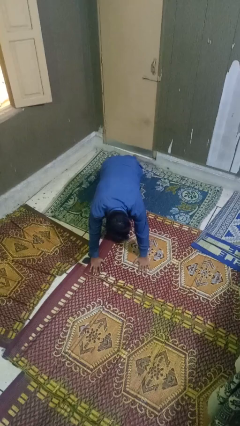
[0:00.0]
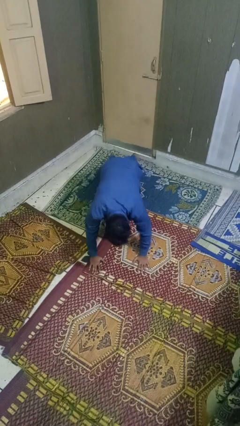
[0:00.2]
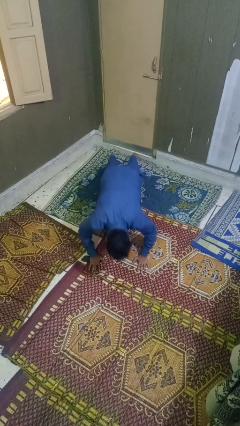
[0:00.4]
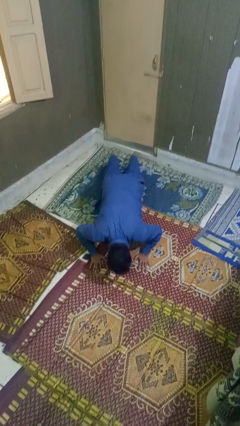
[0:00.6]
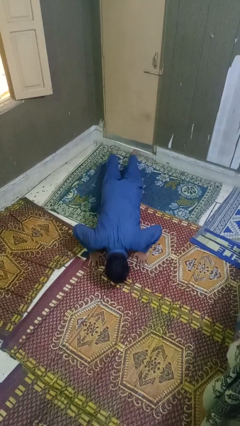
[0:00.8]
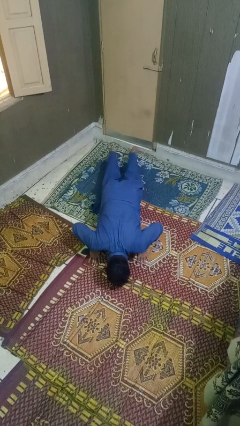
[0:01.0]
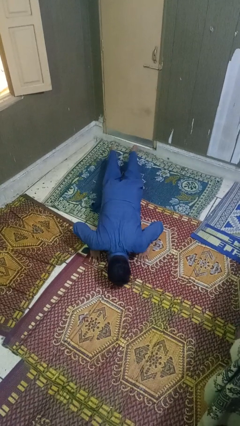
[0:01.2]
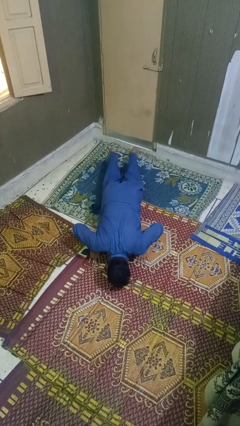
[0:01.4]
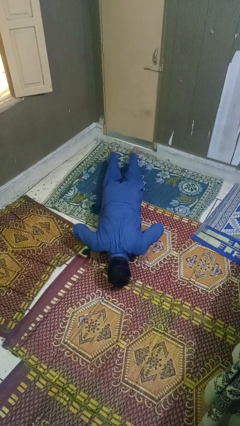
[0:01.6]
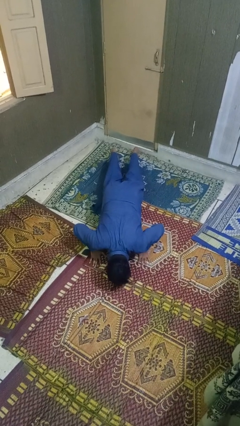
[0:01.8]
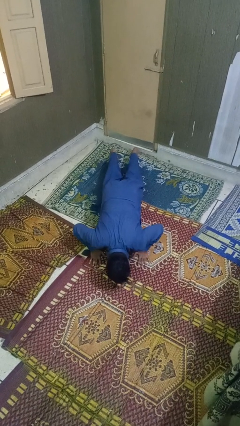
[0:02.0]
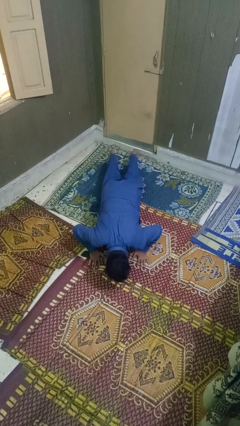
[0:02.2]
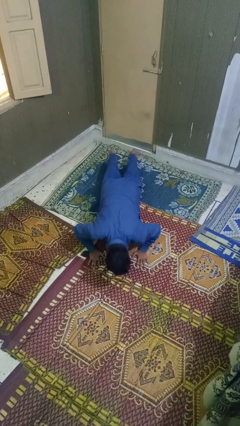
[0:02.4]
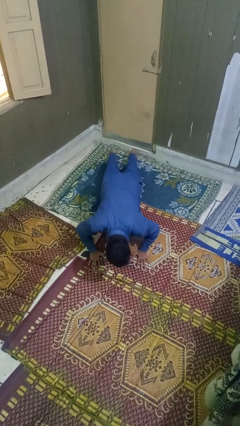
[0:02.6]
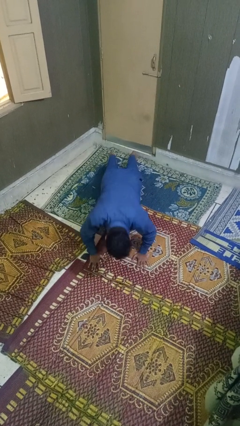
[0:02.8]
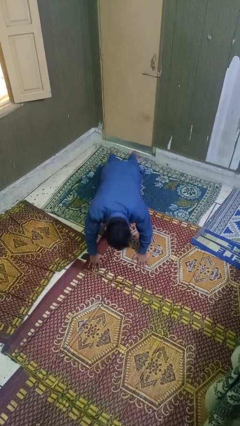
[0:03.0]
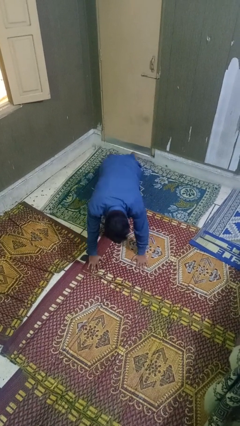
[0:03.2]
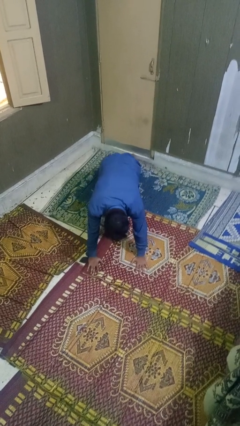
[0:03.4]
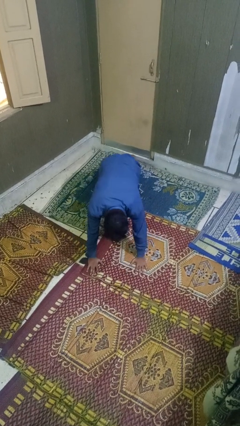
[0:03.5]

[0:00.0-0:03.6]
person exercises with pushup

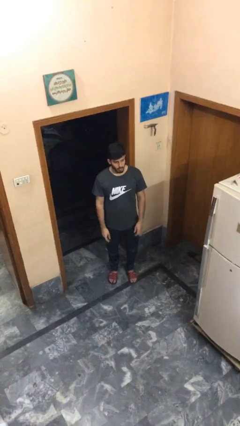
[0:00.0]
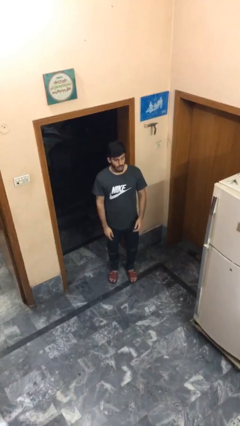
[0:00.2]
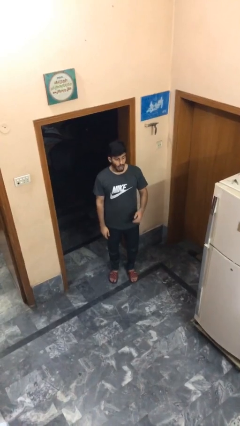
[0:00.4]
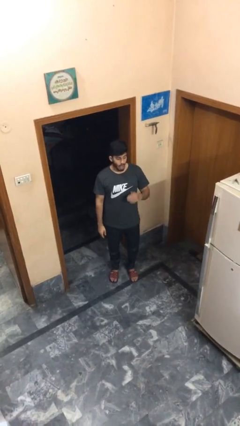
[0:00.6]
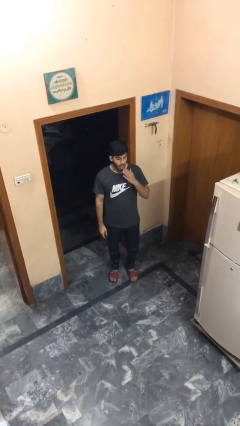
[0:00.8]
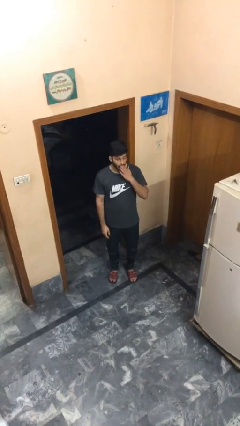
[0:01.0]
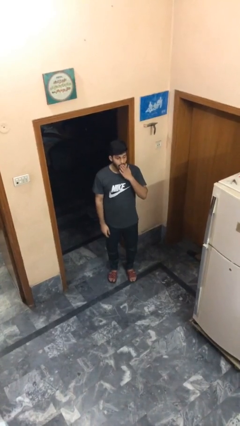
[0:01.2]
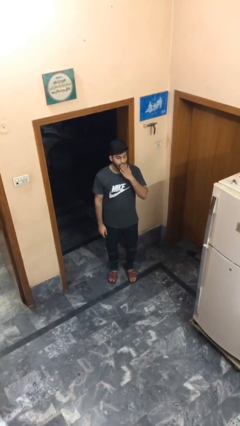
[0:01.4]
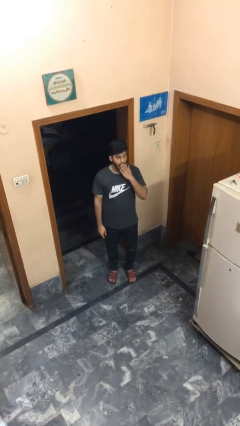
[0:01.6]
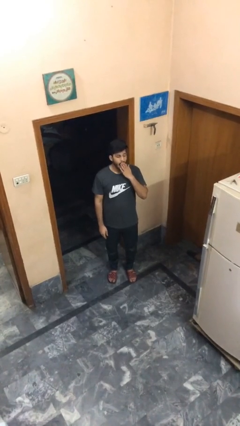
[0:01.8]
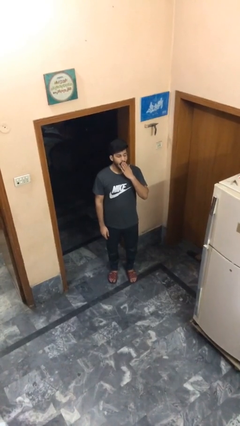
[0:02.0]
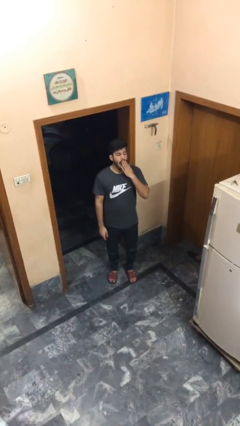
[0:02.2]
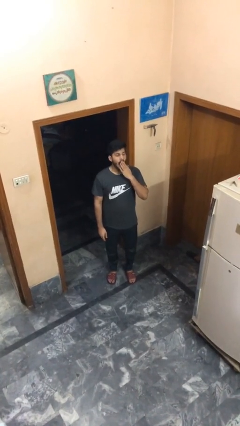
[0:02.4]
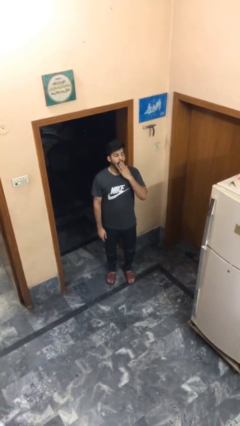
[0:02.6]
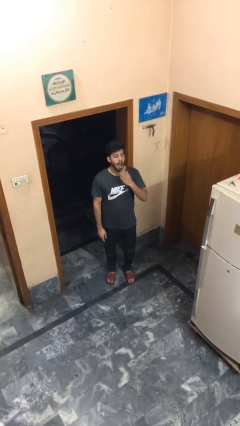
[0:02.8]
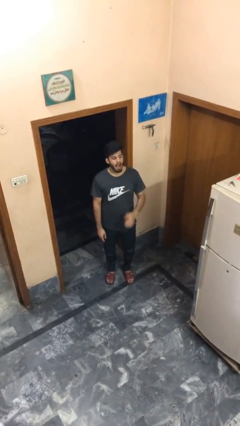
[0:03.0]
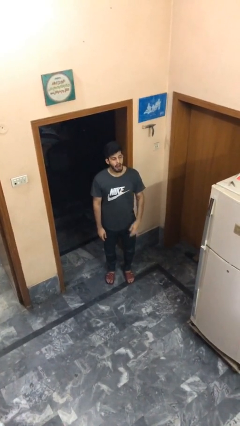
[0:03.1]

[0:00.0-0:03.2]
person yawns

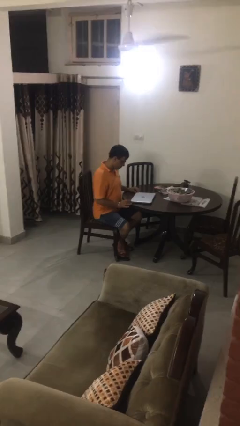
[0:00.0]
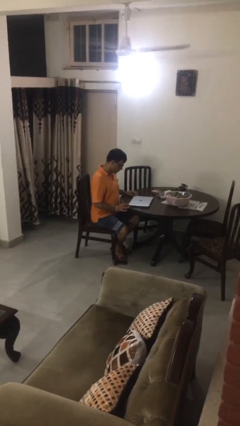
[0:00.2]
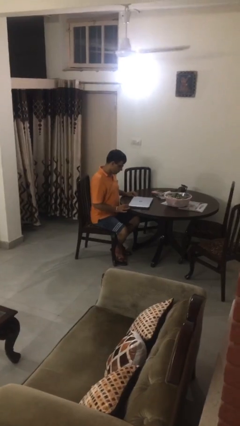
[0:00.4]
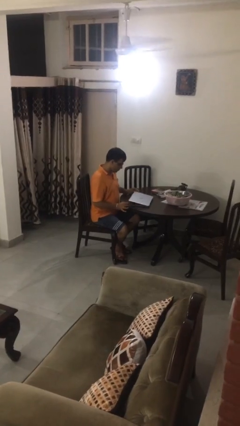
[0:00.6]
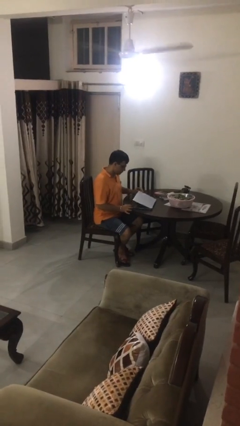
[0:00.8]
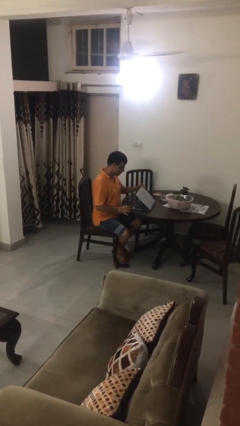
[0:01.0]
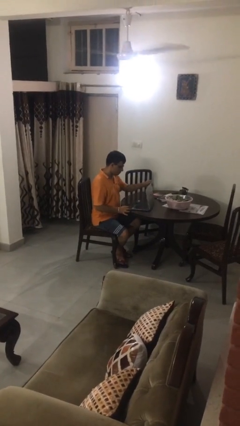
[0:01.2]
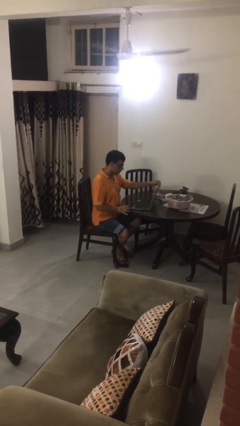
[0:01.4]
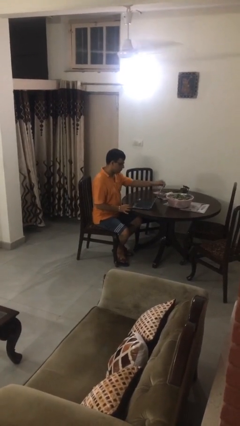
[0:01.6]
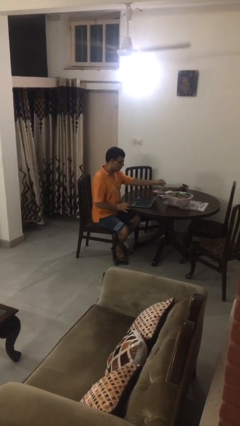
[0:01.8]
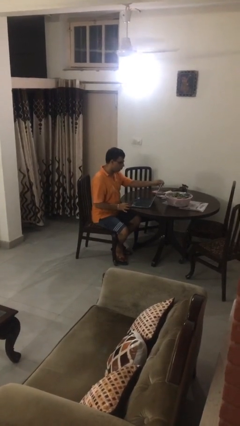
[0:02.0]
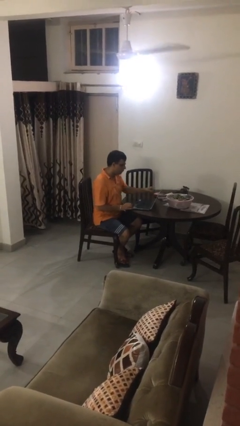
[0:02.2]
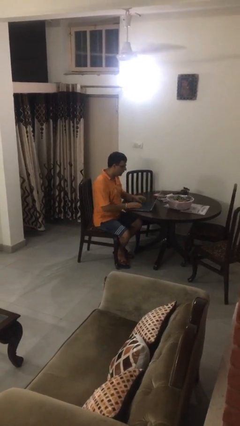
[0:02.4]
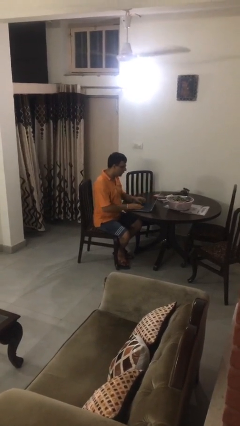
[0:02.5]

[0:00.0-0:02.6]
person opens laptop

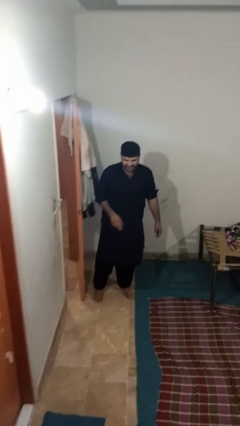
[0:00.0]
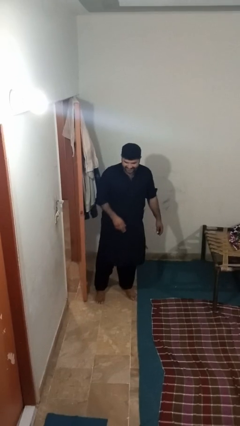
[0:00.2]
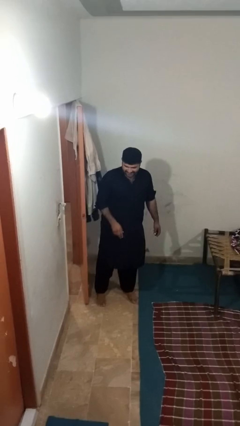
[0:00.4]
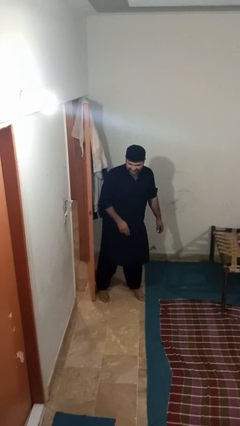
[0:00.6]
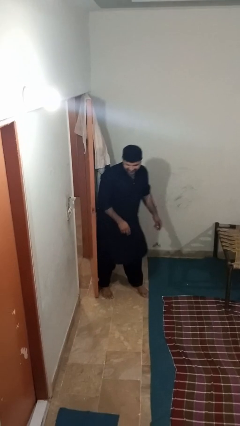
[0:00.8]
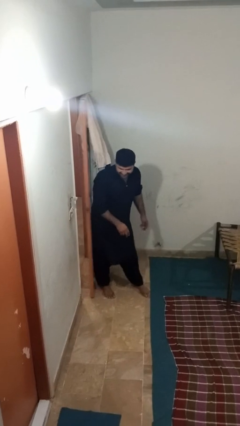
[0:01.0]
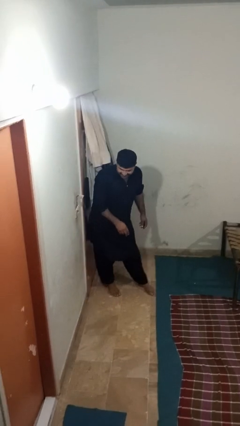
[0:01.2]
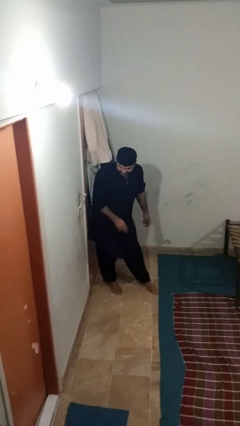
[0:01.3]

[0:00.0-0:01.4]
person closes door with hip

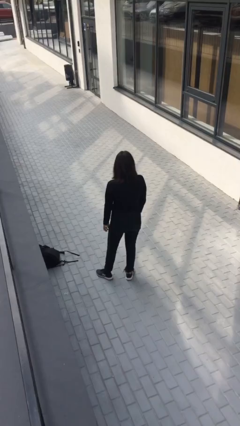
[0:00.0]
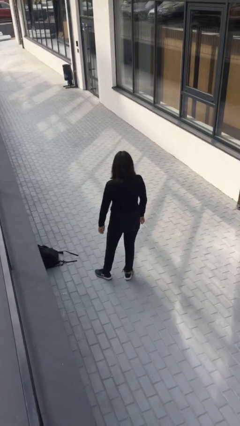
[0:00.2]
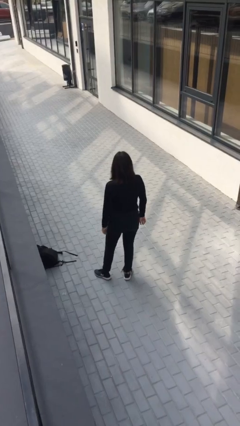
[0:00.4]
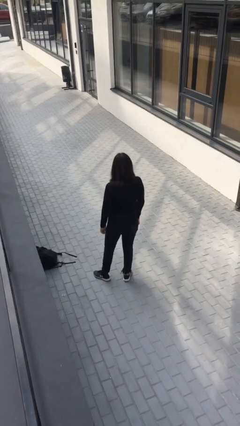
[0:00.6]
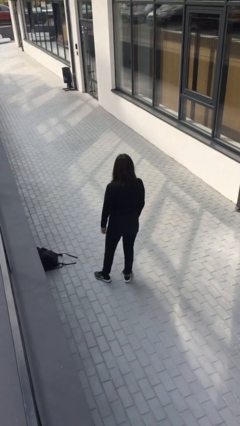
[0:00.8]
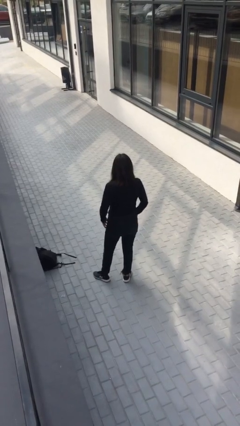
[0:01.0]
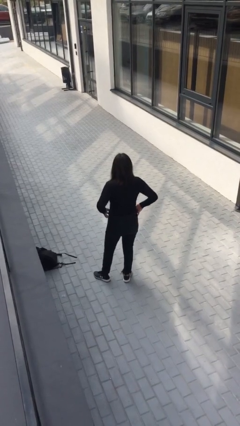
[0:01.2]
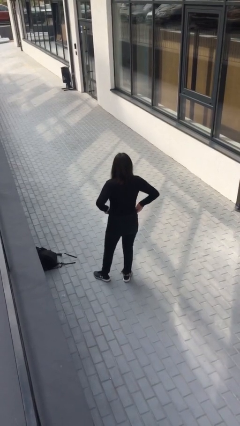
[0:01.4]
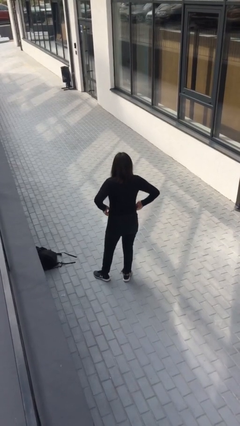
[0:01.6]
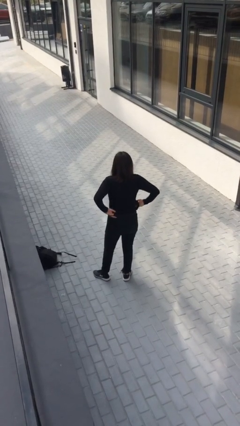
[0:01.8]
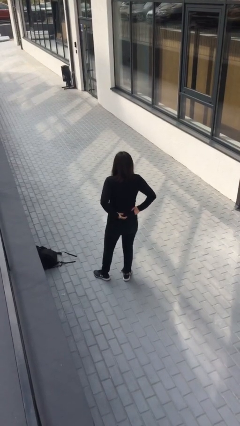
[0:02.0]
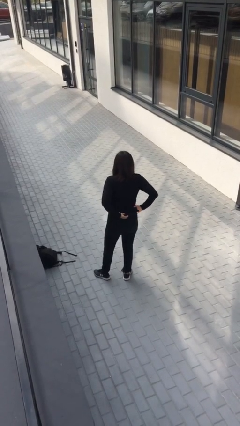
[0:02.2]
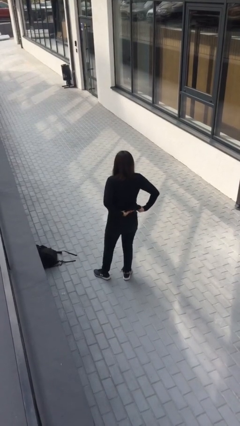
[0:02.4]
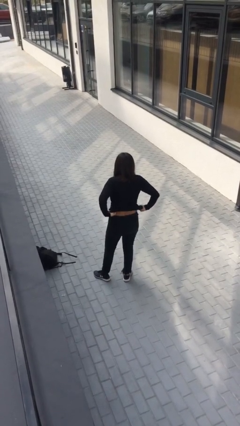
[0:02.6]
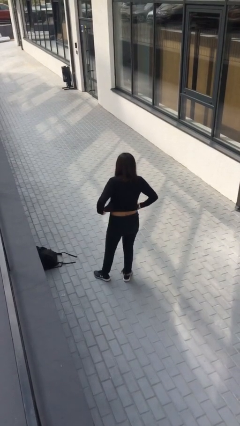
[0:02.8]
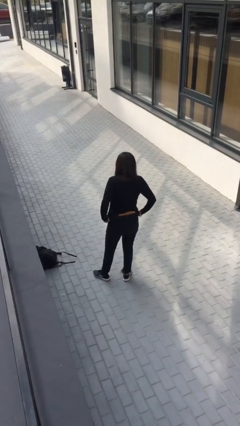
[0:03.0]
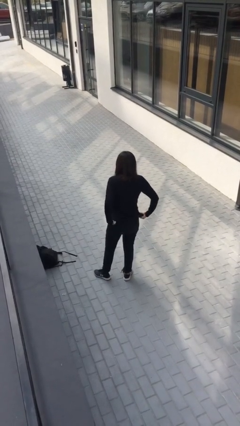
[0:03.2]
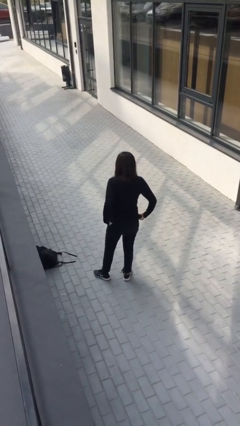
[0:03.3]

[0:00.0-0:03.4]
person untucks shirt

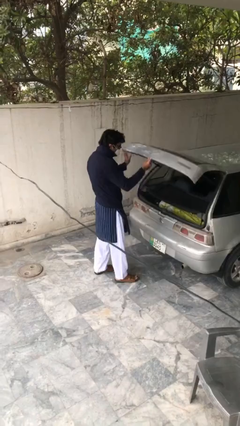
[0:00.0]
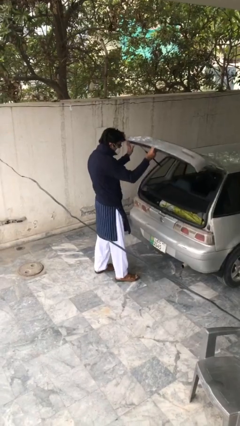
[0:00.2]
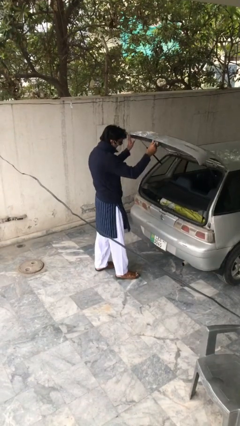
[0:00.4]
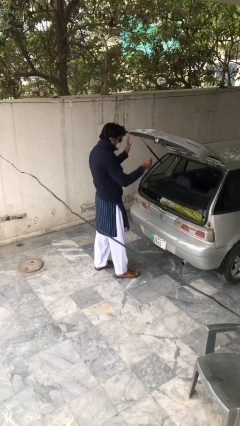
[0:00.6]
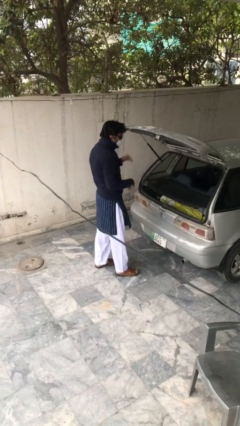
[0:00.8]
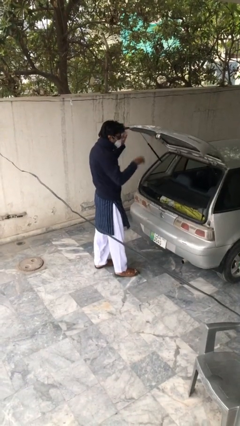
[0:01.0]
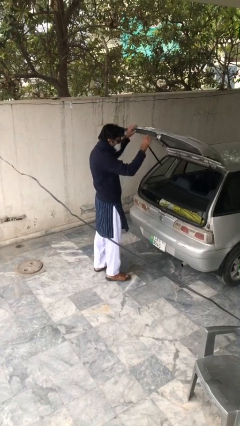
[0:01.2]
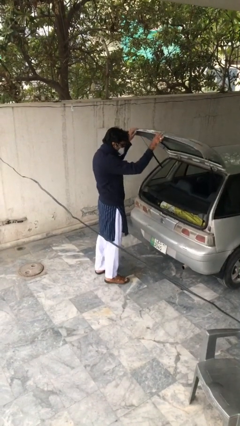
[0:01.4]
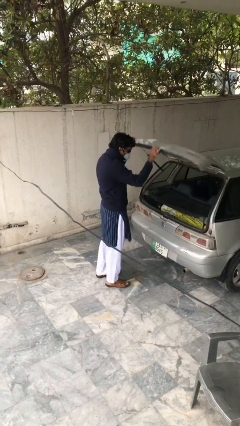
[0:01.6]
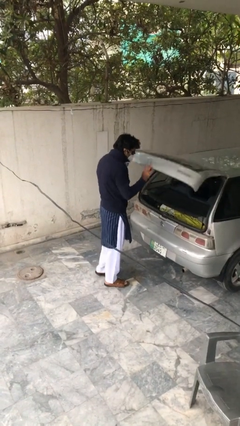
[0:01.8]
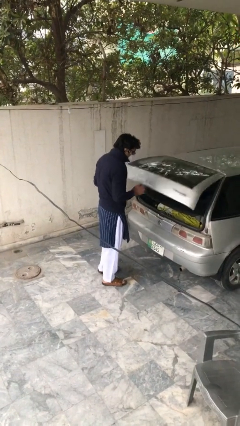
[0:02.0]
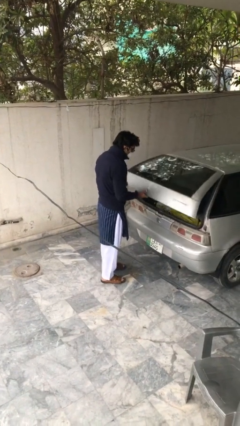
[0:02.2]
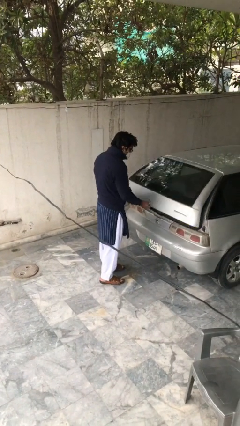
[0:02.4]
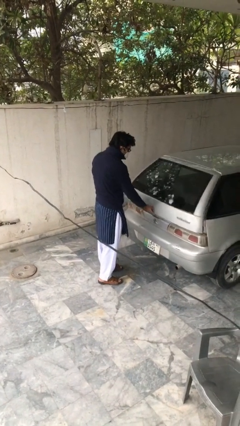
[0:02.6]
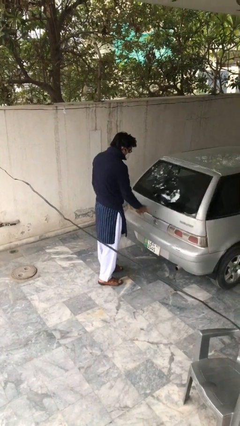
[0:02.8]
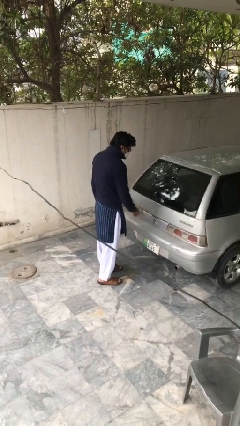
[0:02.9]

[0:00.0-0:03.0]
person closes car trunk

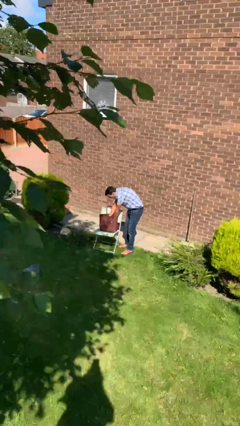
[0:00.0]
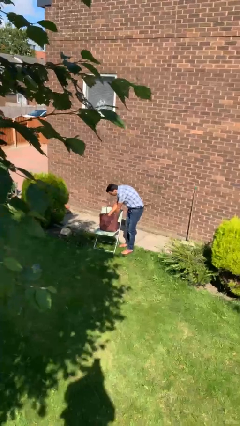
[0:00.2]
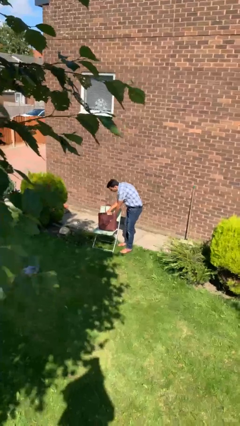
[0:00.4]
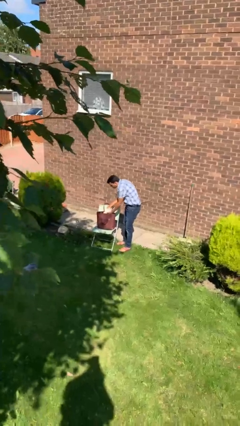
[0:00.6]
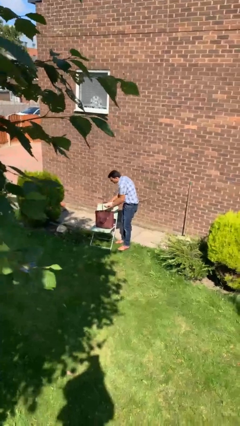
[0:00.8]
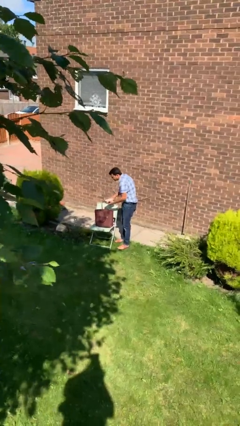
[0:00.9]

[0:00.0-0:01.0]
person takes object from purse
